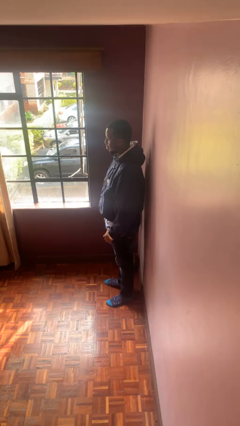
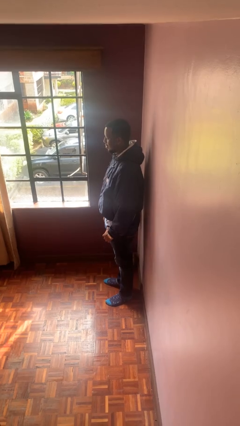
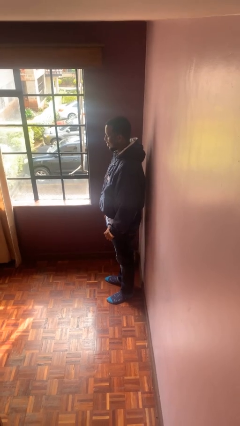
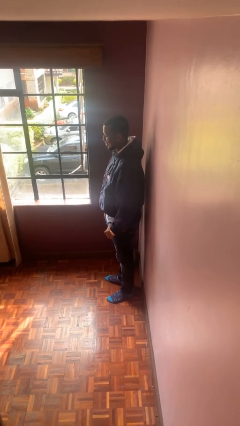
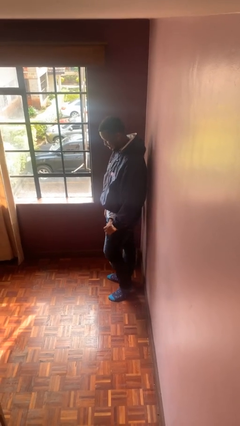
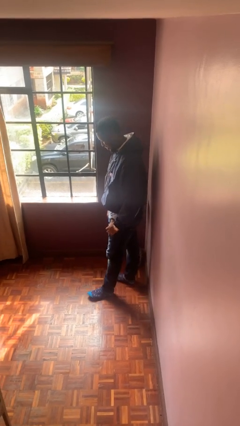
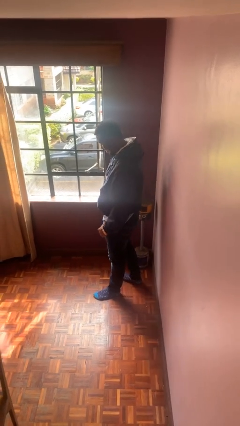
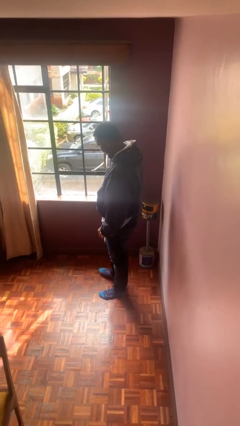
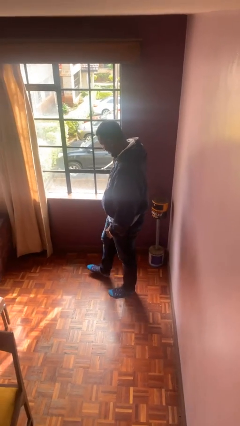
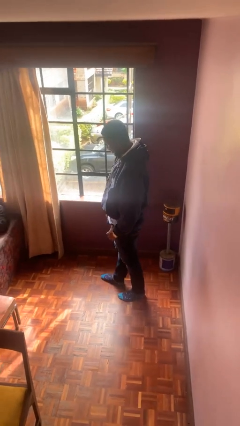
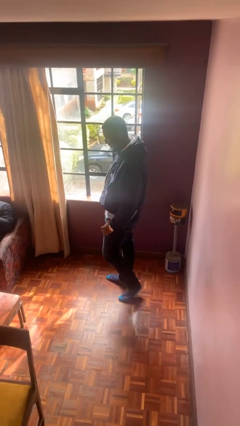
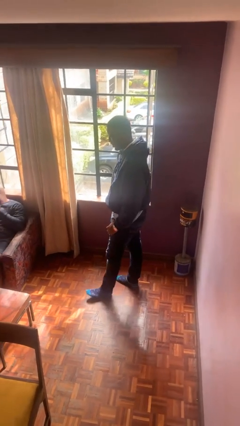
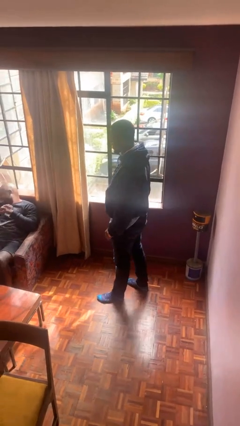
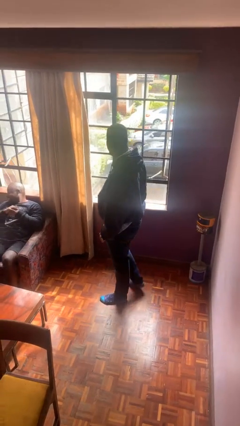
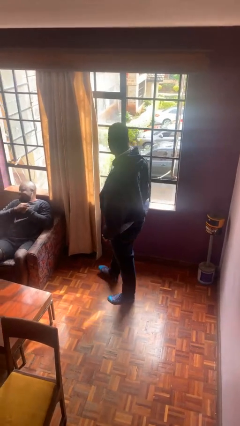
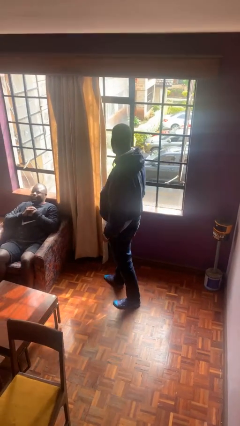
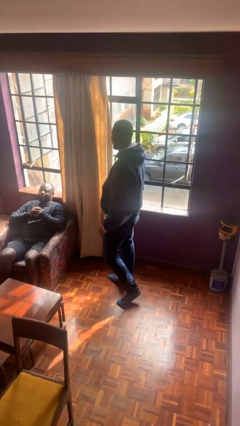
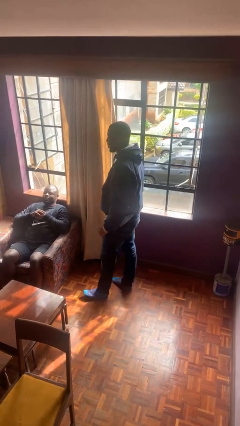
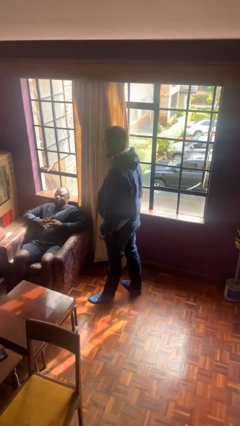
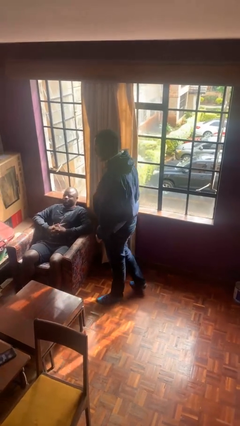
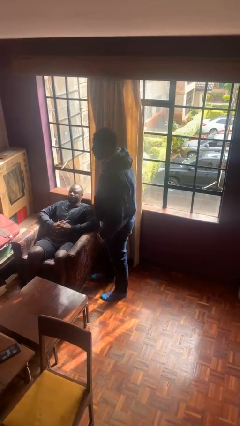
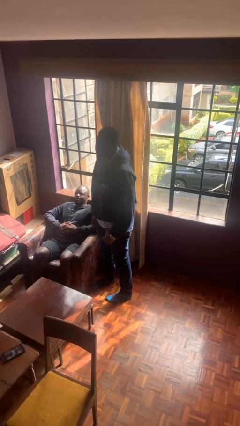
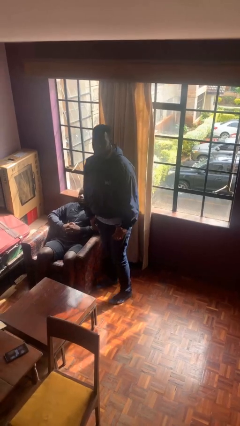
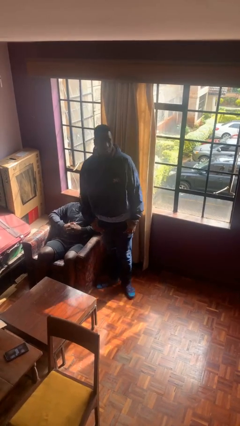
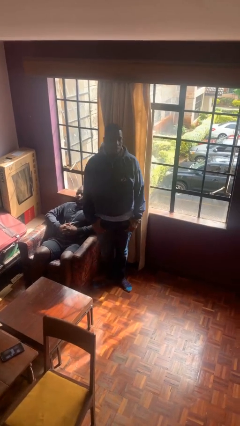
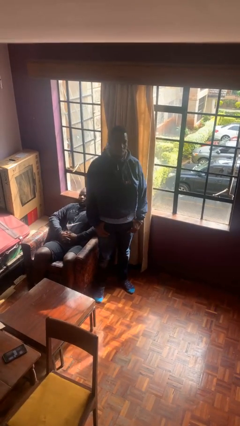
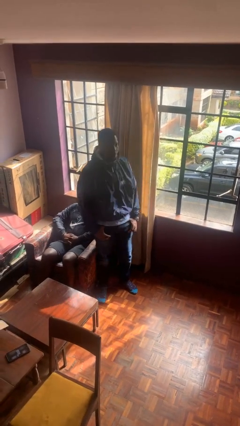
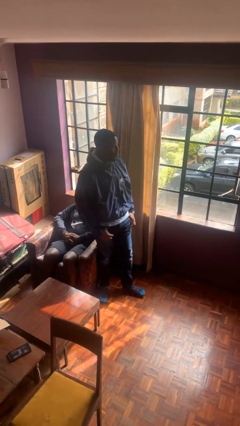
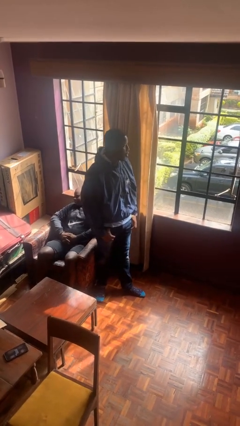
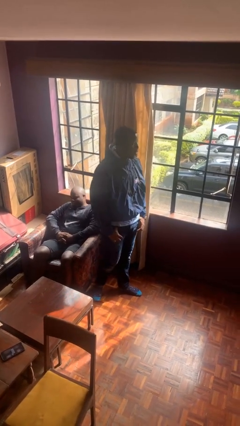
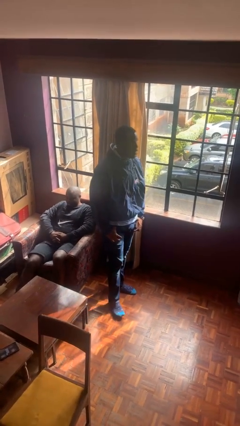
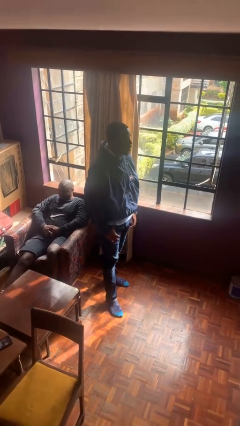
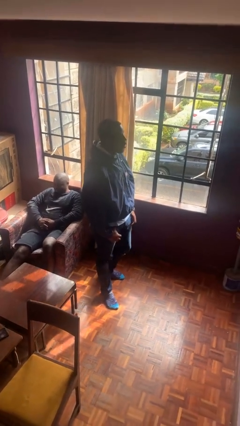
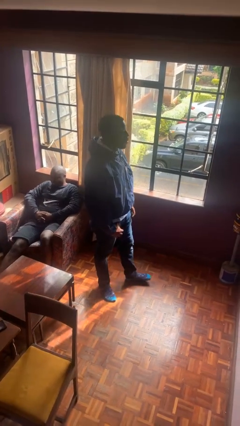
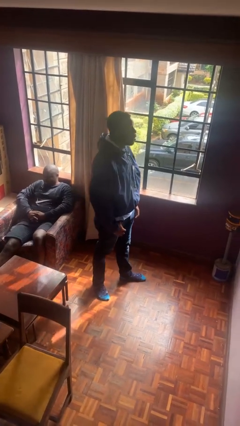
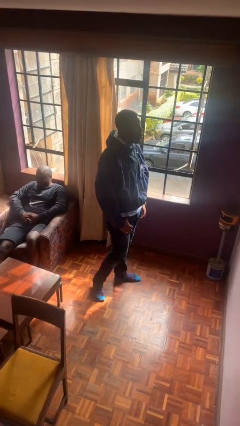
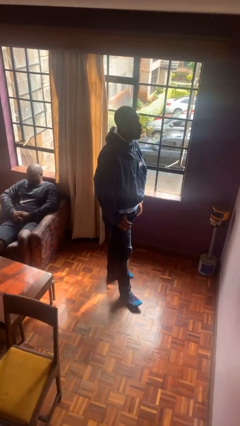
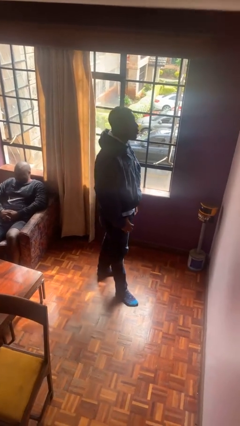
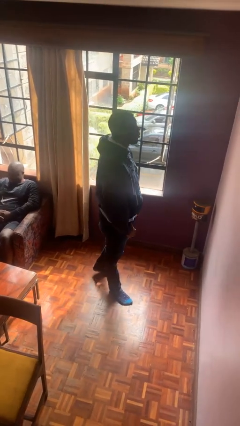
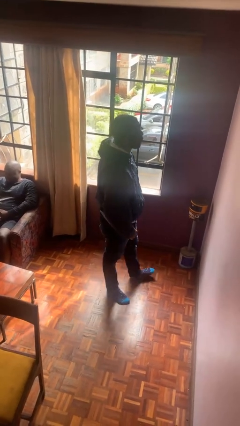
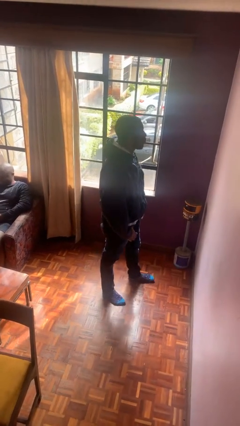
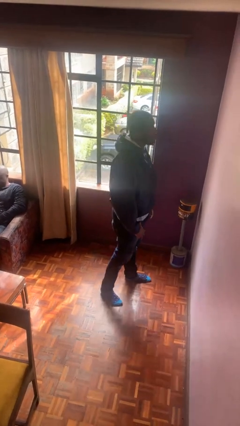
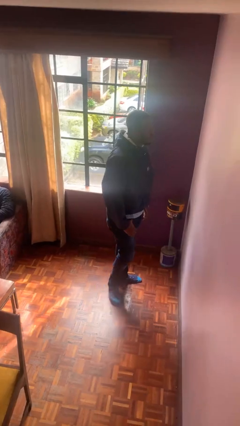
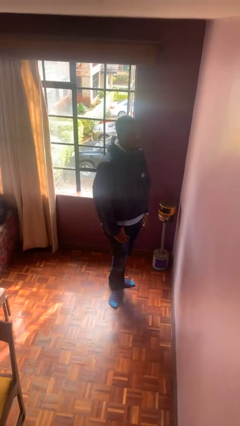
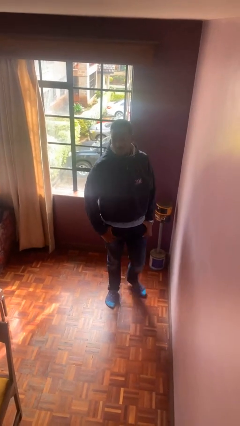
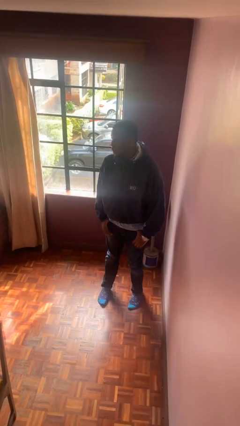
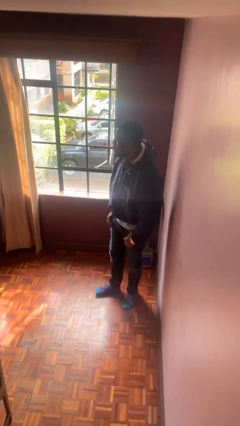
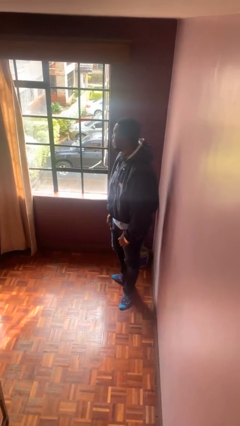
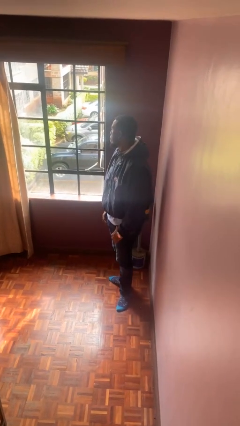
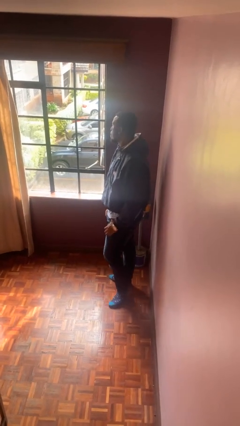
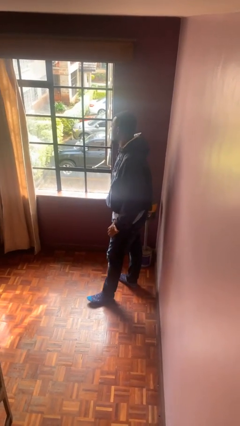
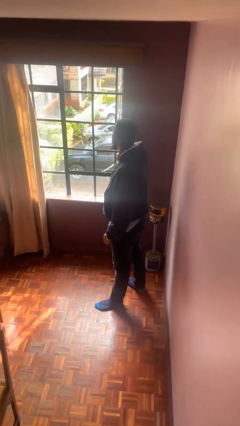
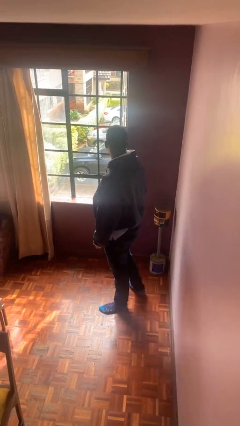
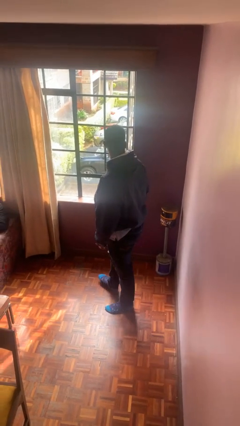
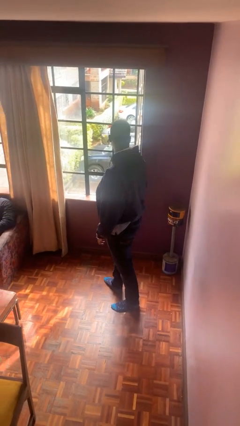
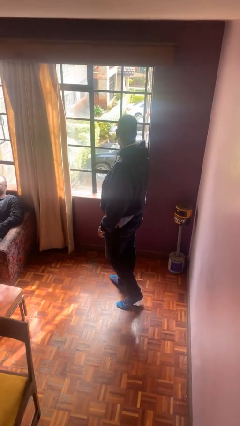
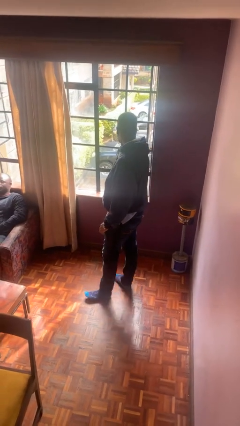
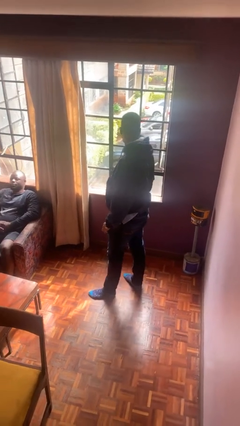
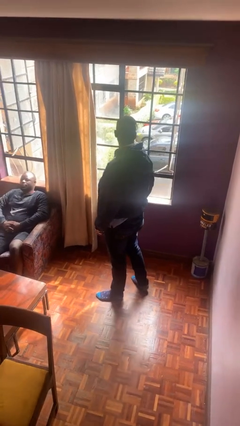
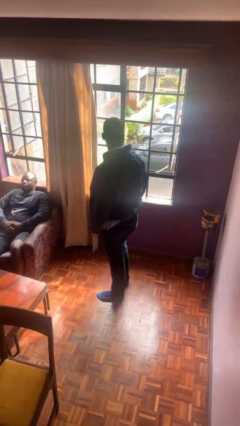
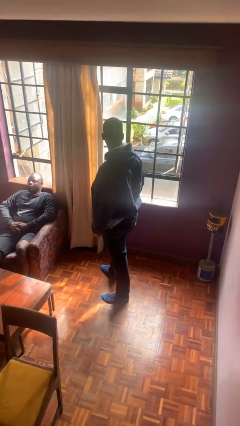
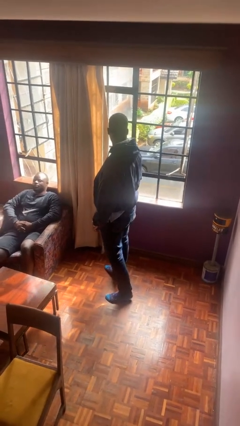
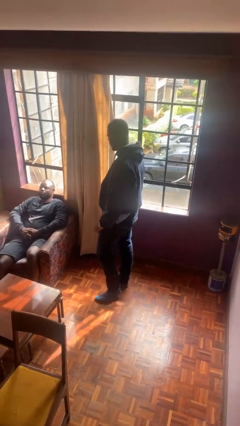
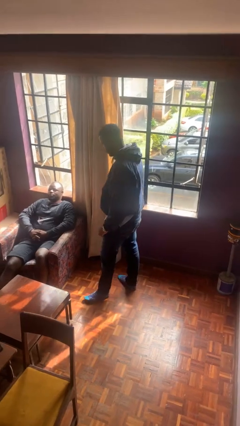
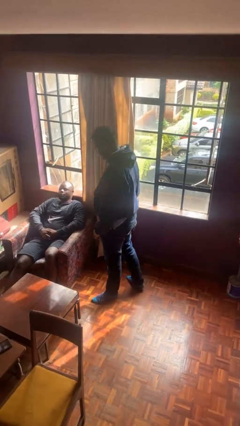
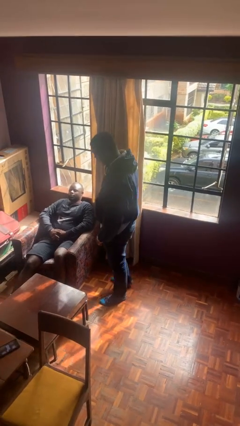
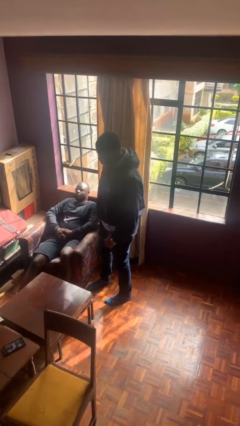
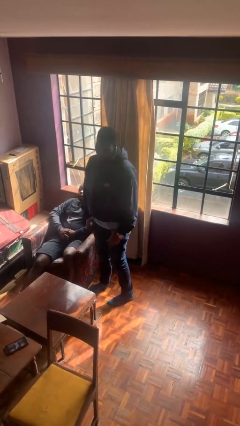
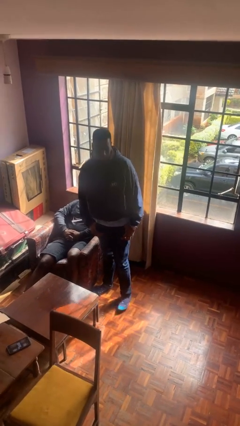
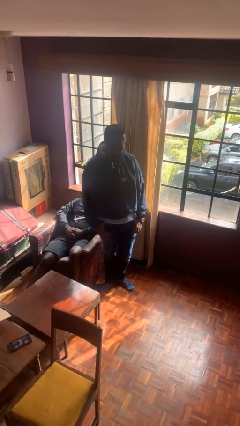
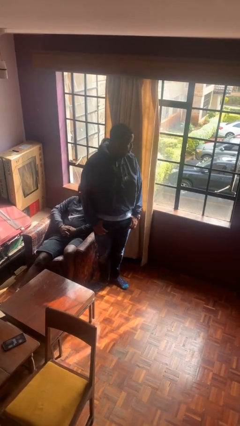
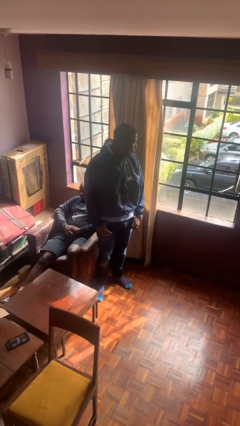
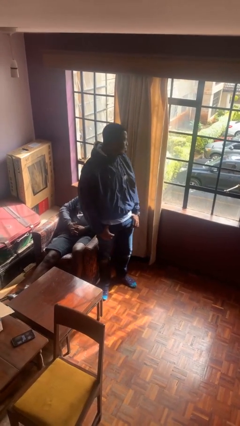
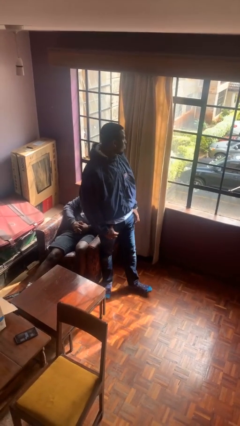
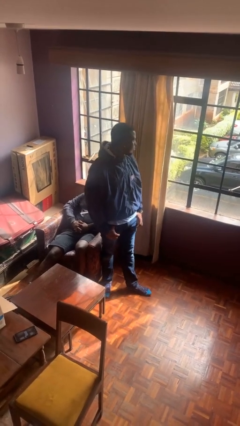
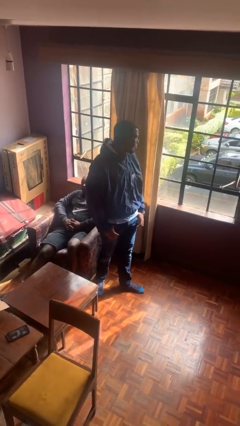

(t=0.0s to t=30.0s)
person walks

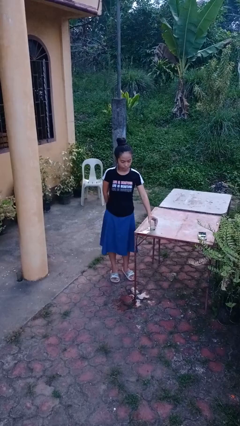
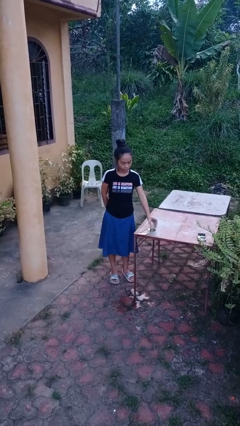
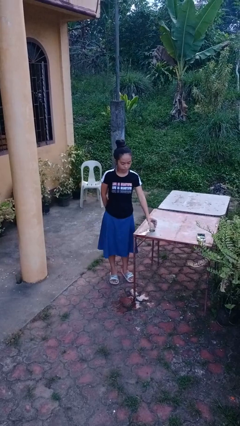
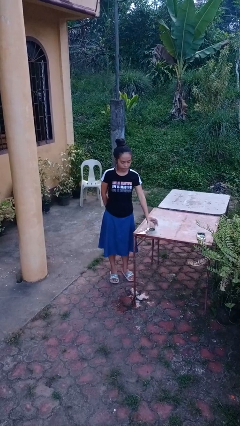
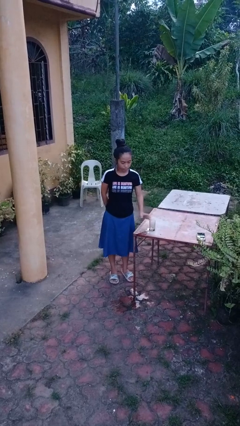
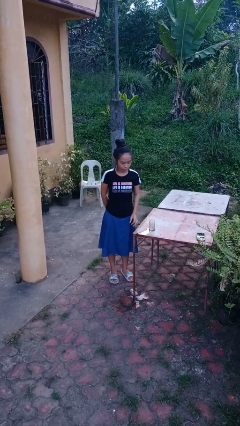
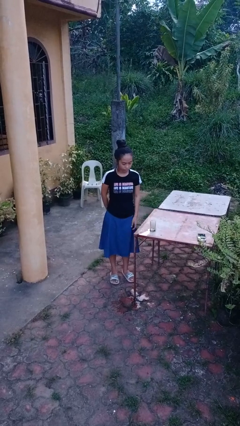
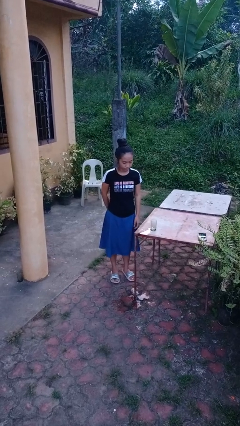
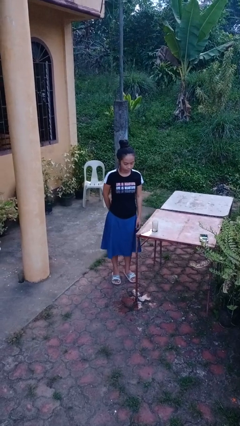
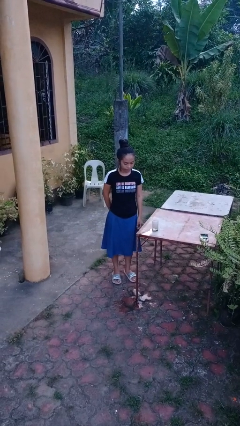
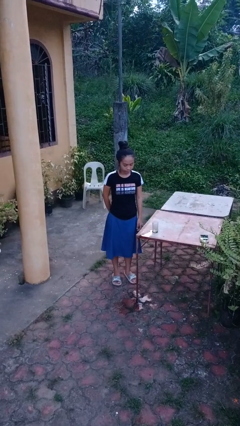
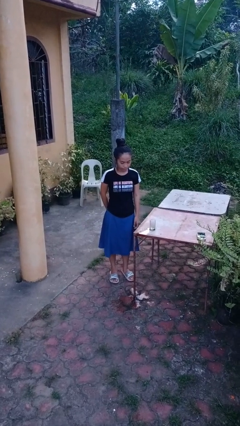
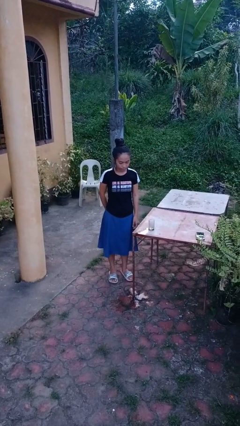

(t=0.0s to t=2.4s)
person sets upright glass

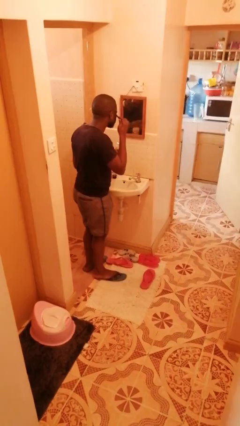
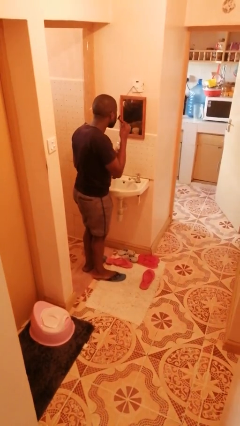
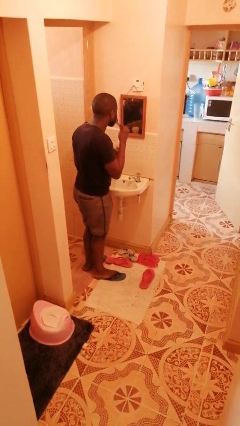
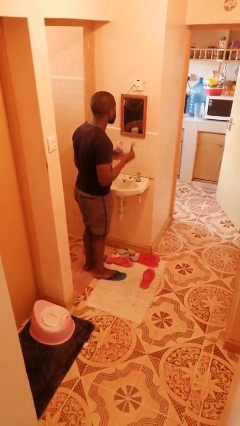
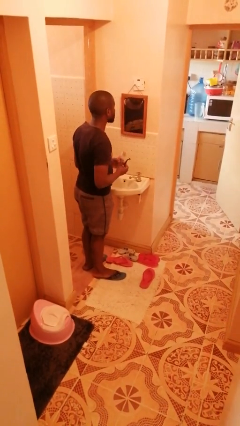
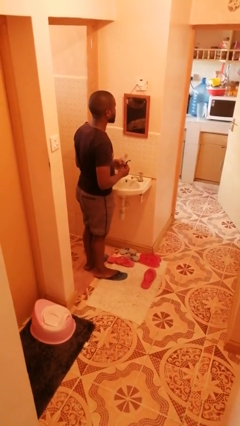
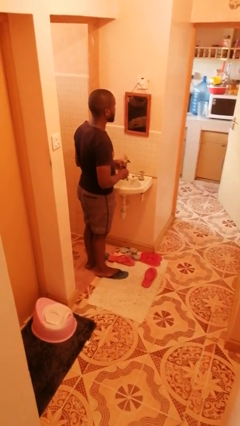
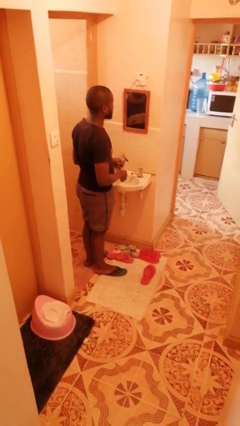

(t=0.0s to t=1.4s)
person shaves face
